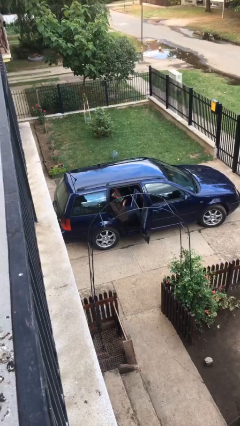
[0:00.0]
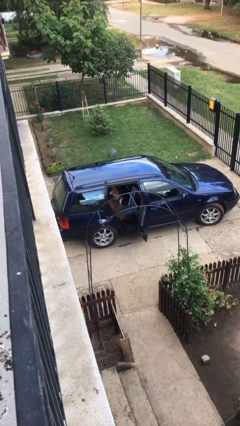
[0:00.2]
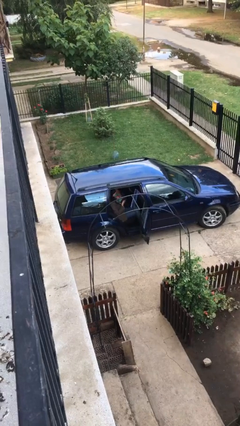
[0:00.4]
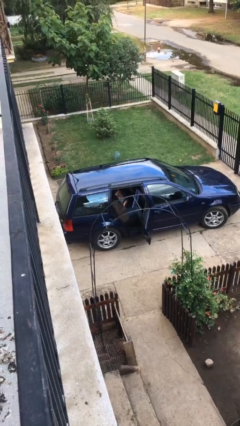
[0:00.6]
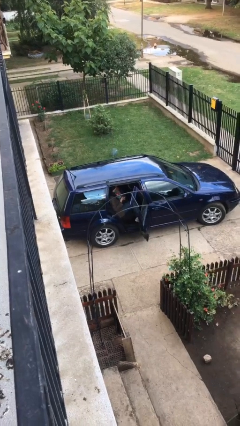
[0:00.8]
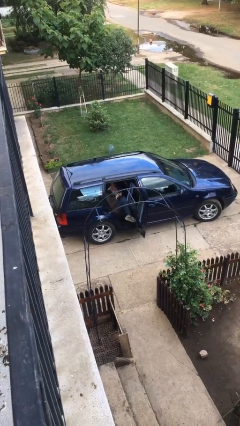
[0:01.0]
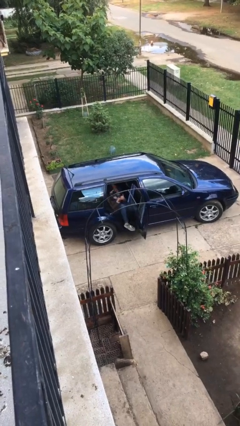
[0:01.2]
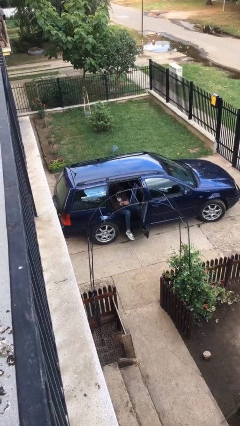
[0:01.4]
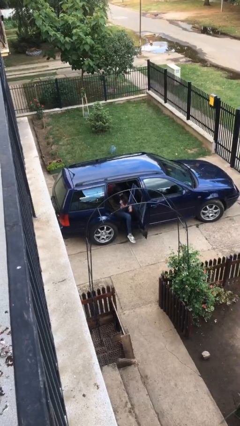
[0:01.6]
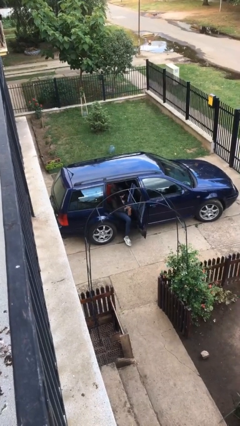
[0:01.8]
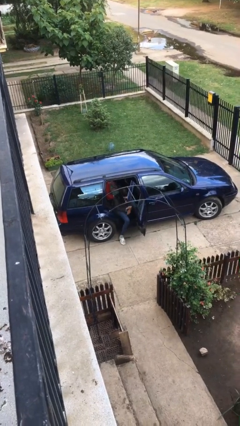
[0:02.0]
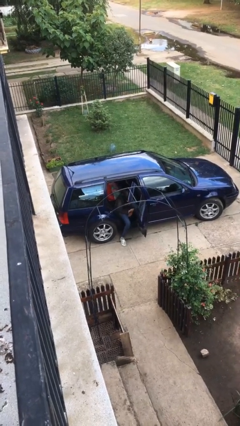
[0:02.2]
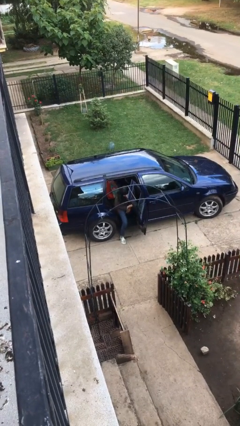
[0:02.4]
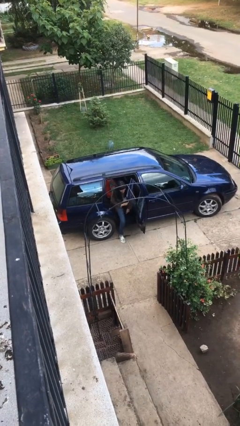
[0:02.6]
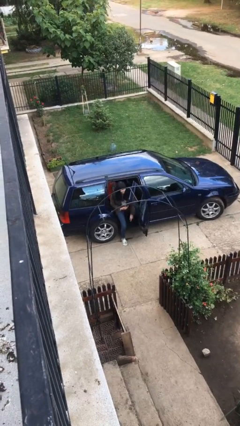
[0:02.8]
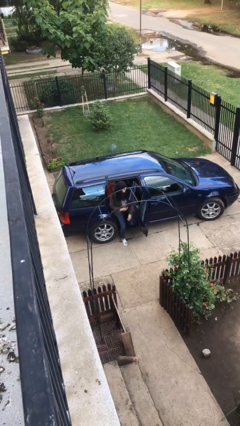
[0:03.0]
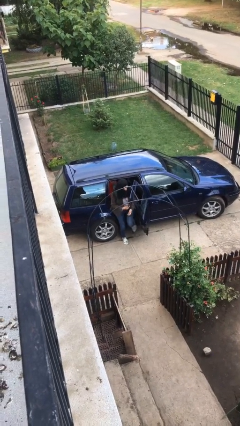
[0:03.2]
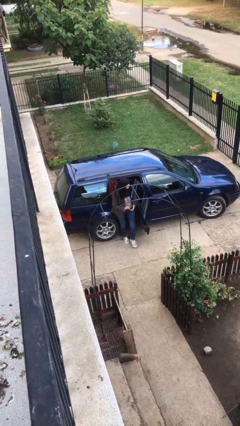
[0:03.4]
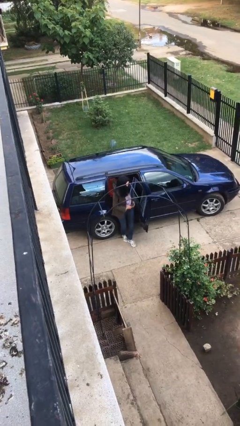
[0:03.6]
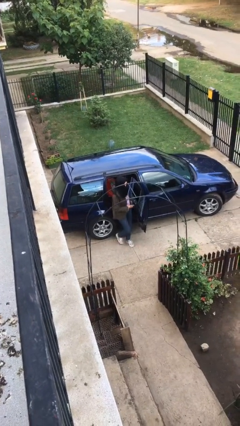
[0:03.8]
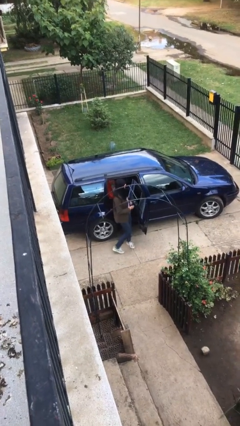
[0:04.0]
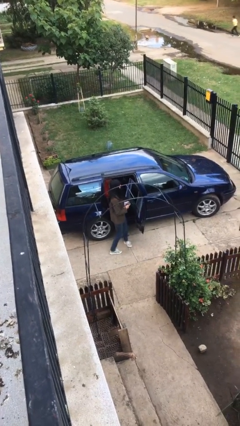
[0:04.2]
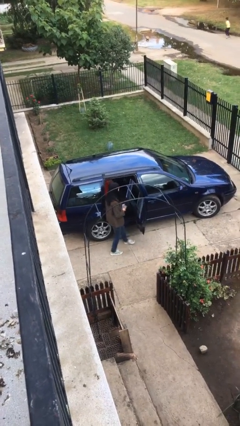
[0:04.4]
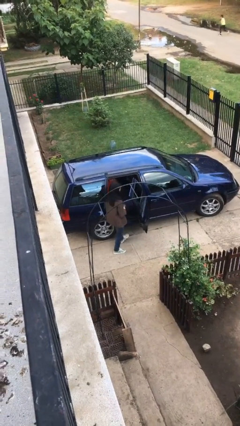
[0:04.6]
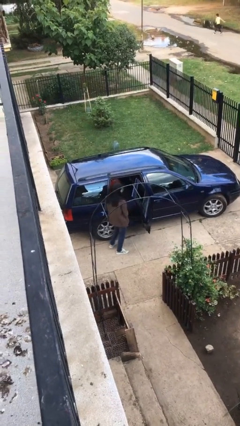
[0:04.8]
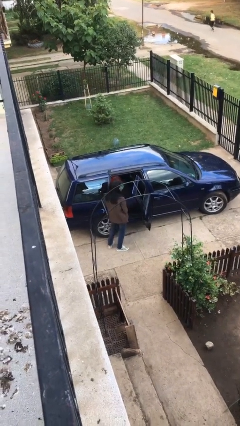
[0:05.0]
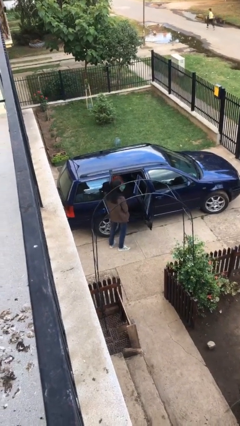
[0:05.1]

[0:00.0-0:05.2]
person exits car

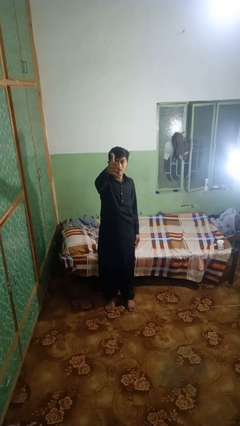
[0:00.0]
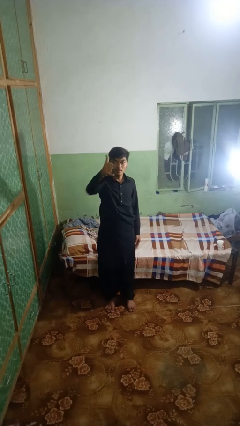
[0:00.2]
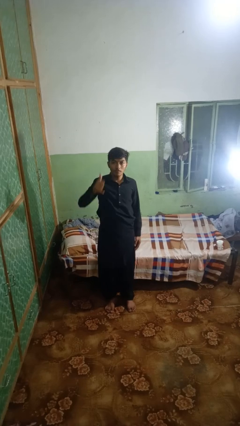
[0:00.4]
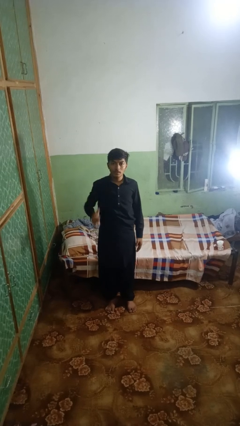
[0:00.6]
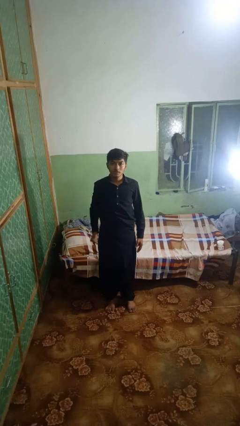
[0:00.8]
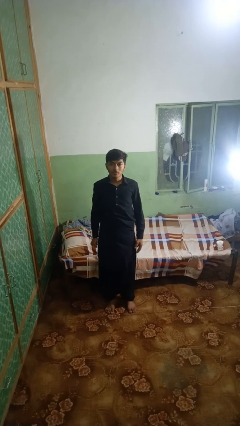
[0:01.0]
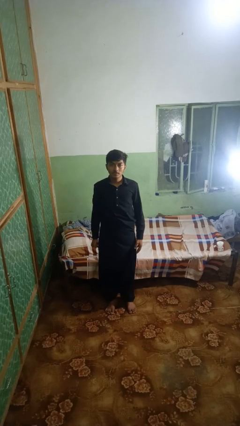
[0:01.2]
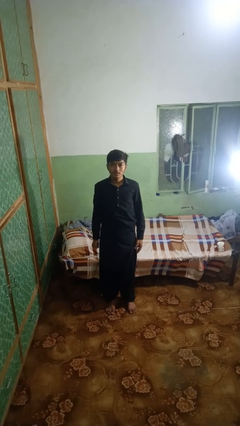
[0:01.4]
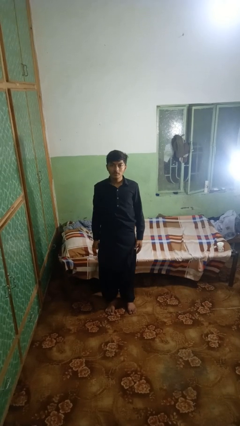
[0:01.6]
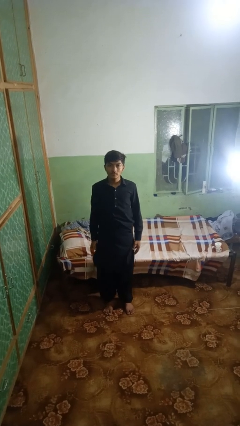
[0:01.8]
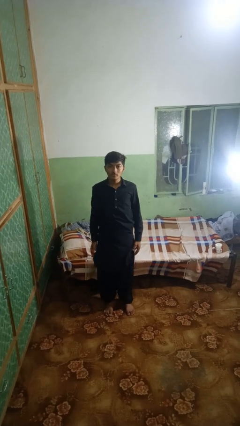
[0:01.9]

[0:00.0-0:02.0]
person gestures hang loose

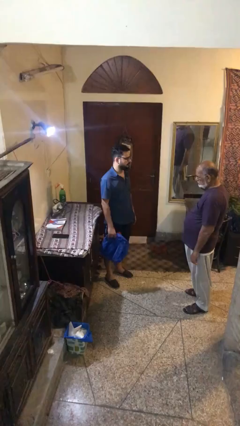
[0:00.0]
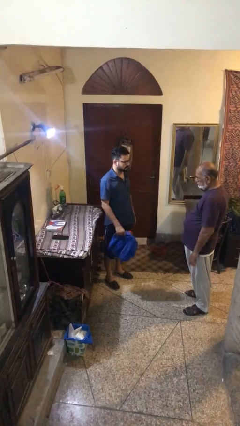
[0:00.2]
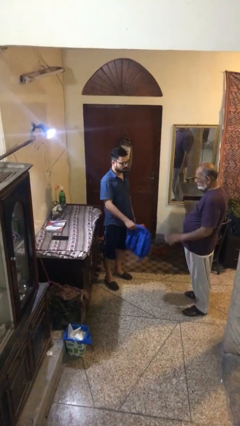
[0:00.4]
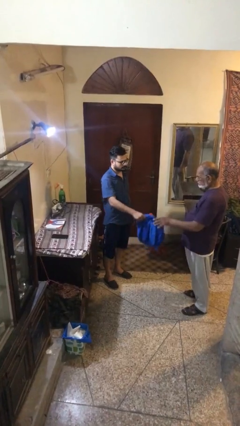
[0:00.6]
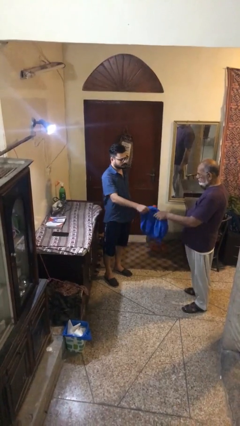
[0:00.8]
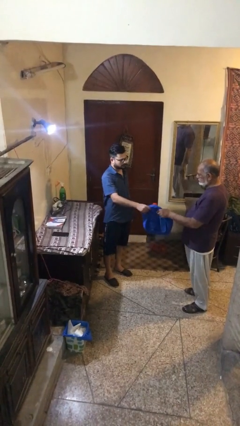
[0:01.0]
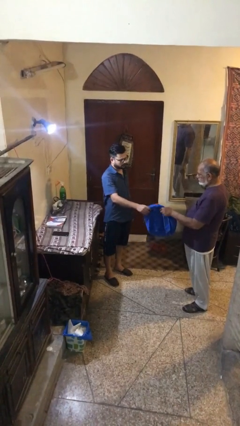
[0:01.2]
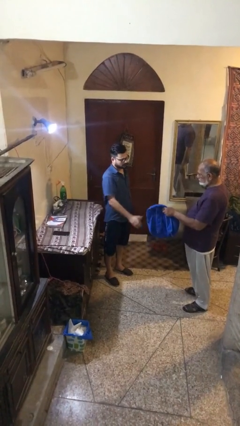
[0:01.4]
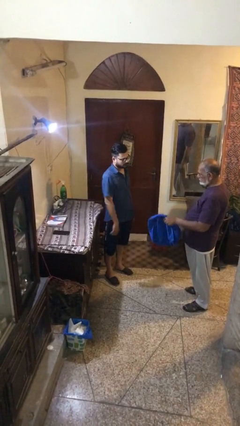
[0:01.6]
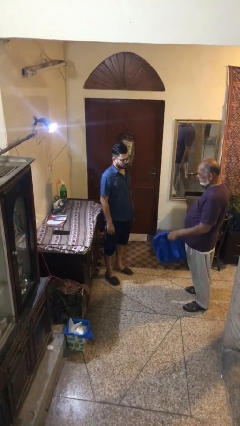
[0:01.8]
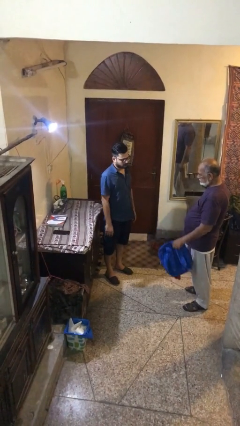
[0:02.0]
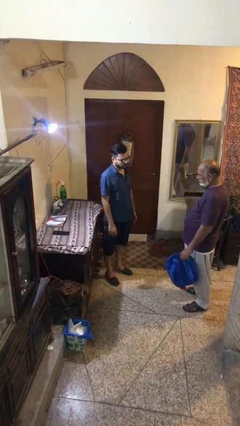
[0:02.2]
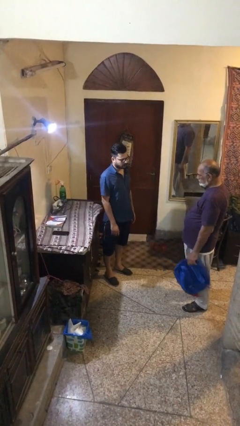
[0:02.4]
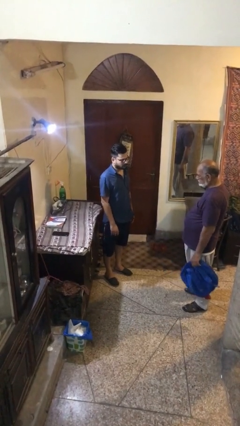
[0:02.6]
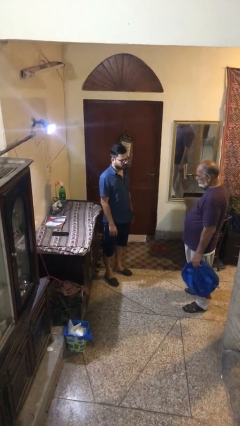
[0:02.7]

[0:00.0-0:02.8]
person transfers object to person

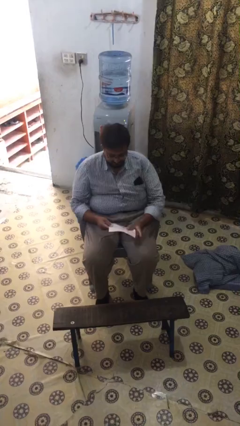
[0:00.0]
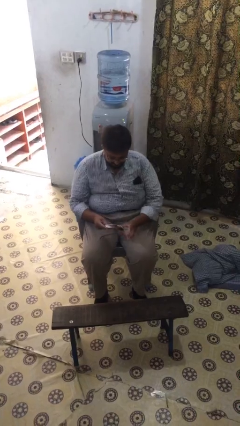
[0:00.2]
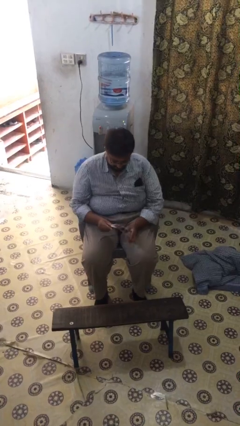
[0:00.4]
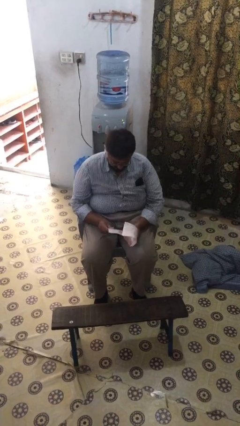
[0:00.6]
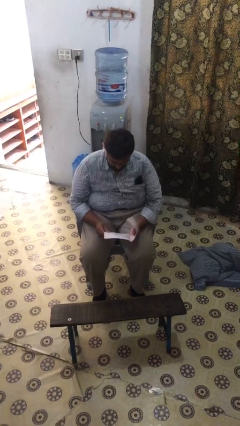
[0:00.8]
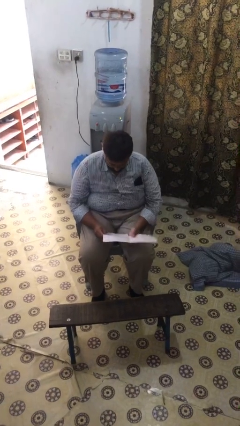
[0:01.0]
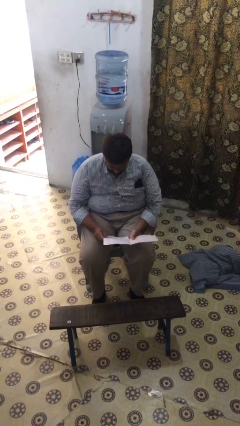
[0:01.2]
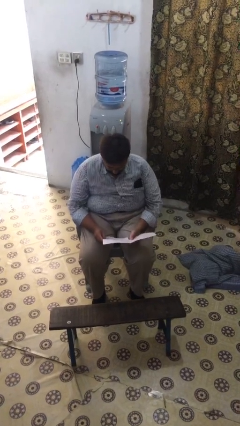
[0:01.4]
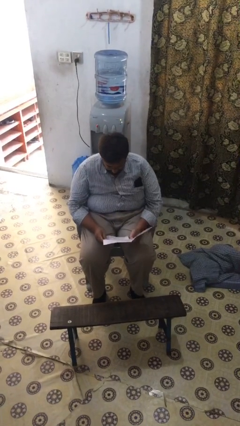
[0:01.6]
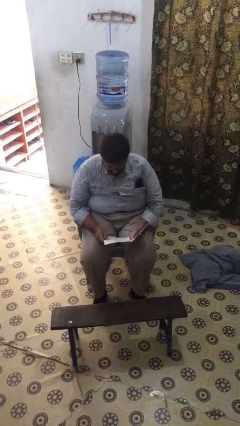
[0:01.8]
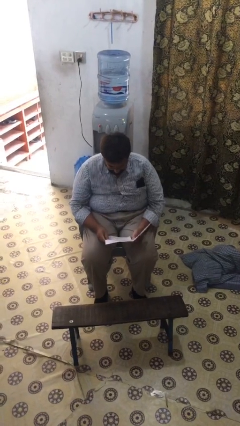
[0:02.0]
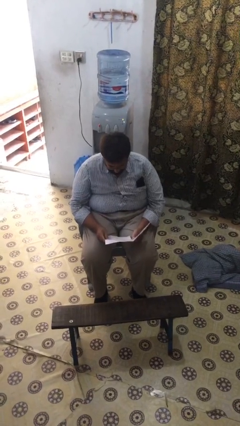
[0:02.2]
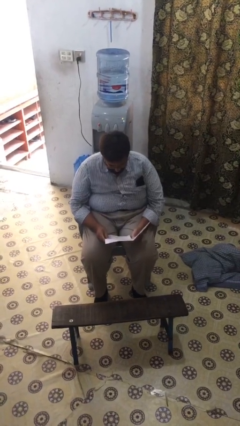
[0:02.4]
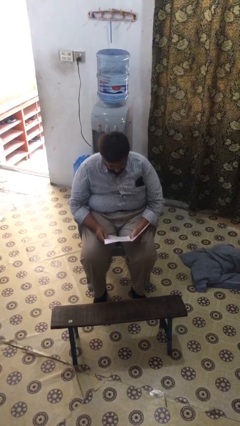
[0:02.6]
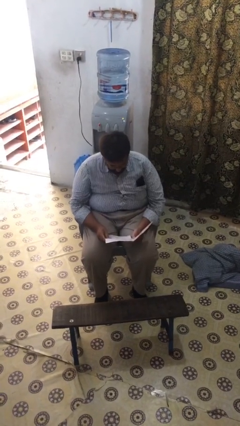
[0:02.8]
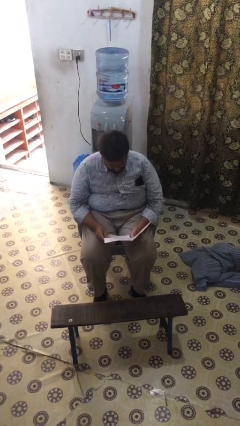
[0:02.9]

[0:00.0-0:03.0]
person reads document

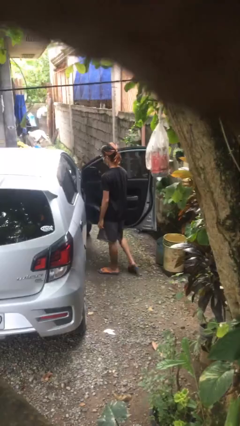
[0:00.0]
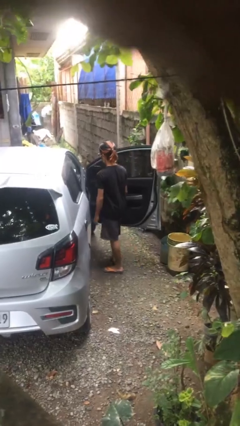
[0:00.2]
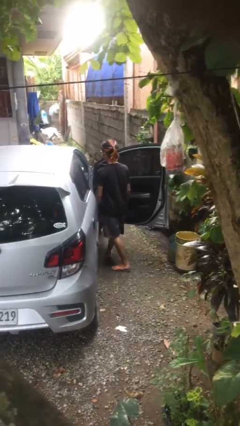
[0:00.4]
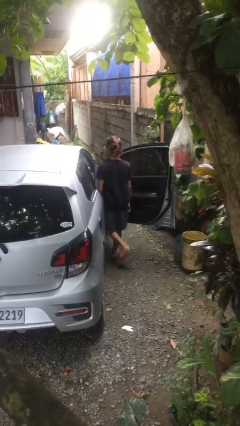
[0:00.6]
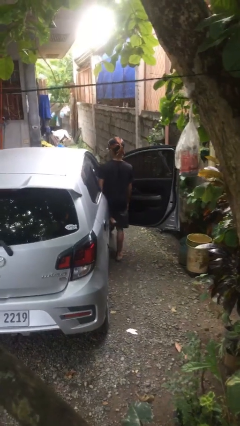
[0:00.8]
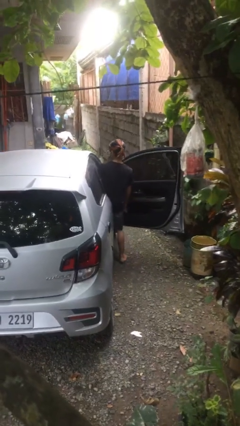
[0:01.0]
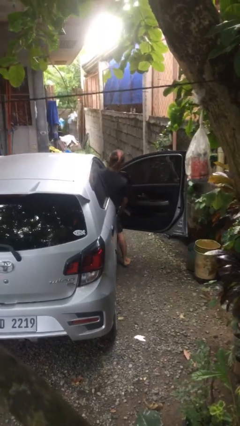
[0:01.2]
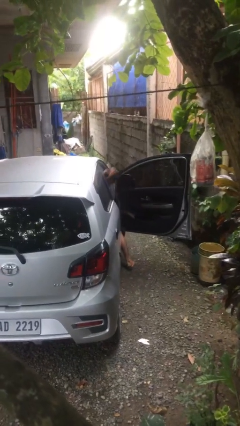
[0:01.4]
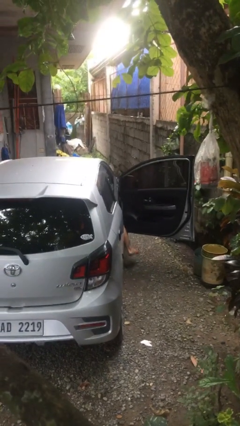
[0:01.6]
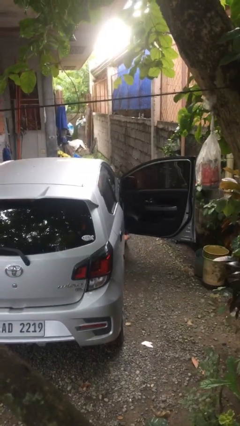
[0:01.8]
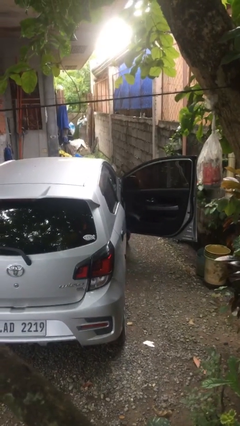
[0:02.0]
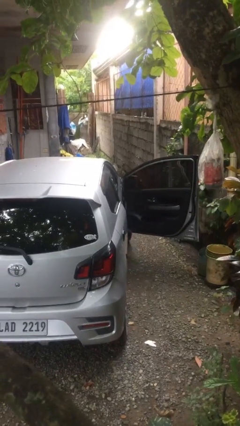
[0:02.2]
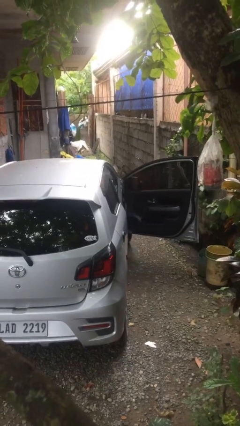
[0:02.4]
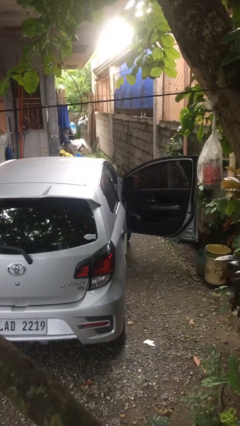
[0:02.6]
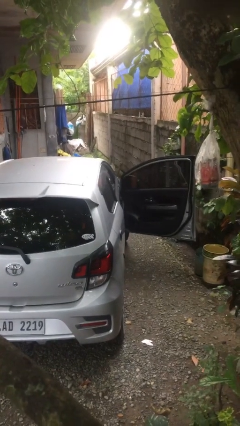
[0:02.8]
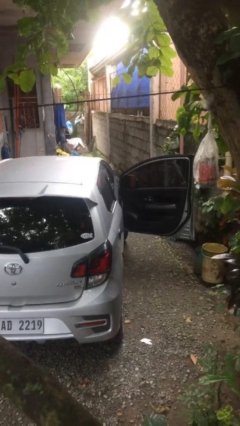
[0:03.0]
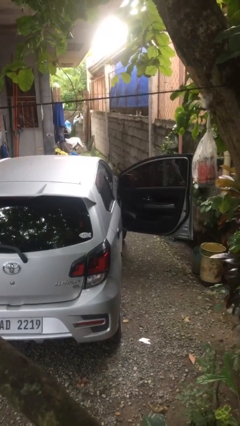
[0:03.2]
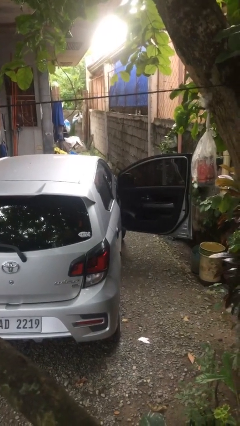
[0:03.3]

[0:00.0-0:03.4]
person enters car

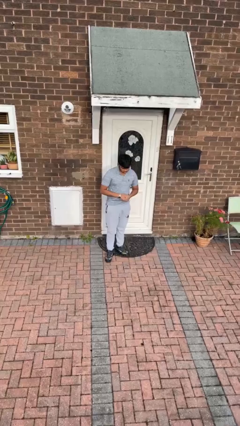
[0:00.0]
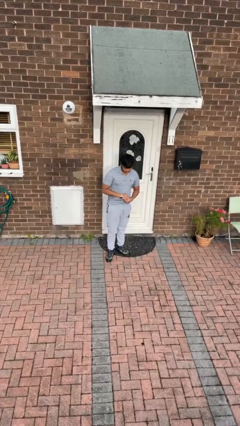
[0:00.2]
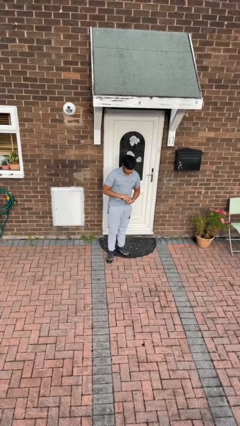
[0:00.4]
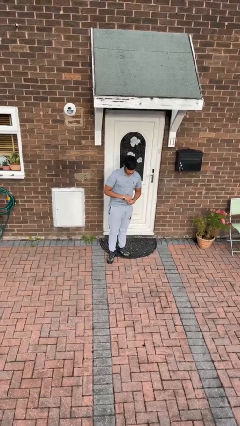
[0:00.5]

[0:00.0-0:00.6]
person stands up from floor

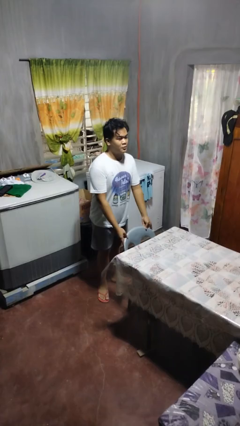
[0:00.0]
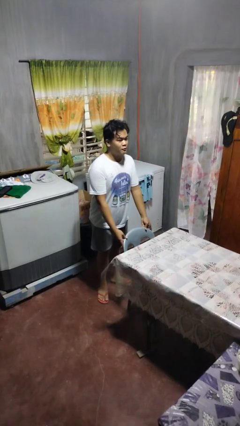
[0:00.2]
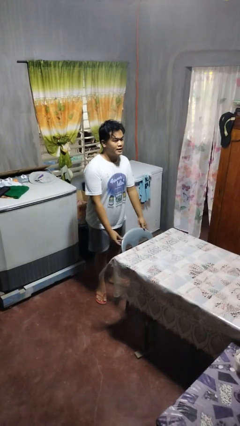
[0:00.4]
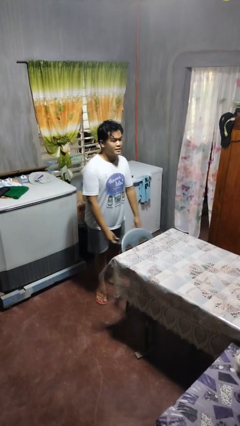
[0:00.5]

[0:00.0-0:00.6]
person pushes in chair
